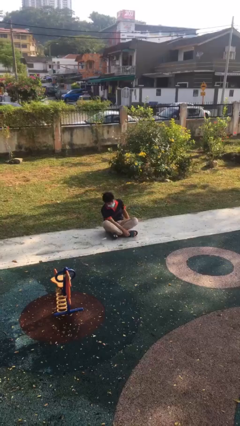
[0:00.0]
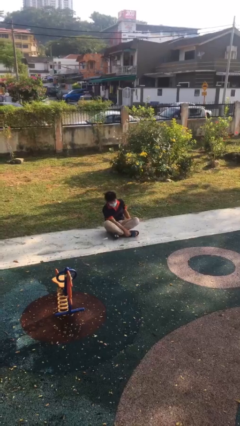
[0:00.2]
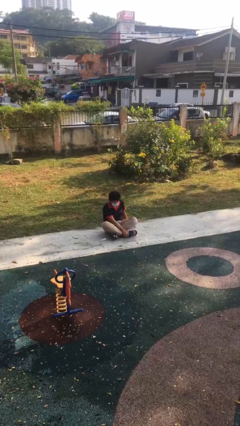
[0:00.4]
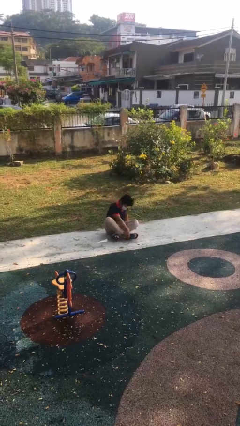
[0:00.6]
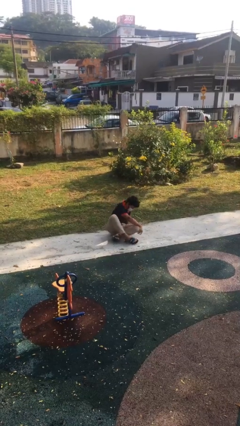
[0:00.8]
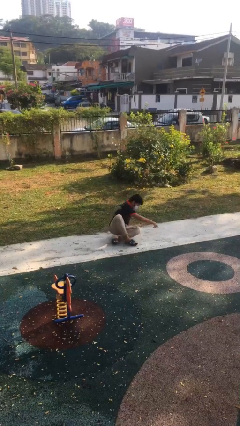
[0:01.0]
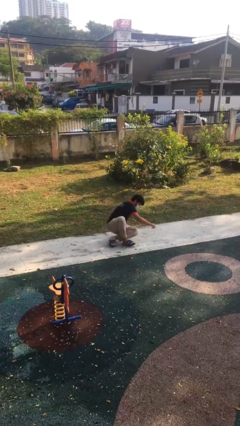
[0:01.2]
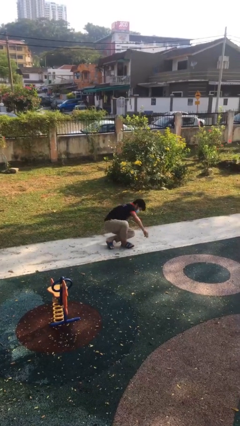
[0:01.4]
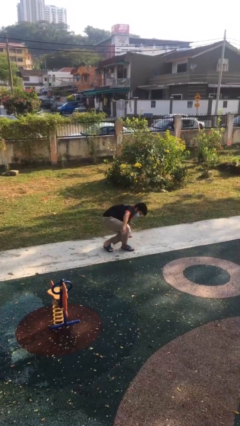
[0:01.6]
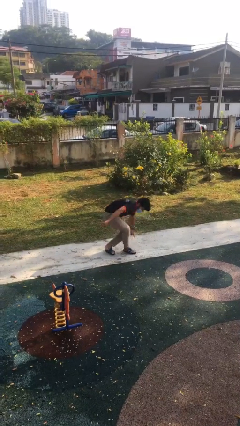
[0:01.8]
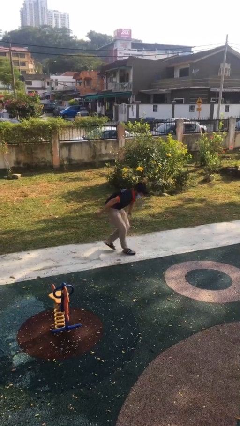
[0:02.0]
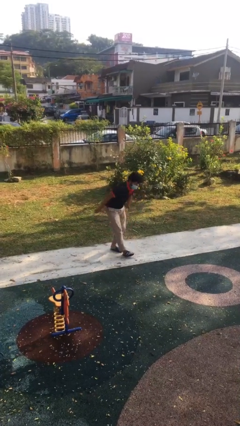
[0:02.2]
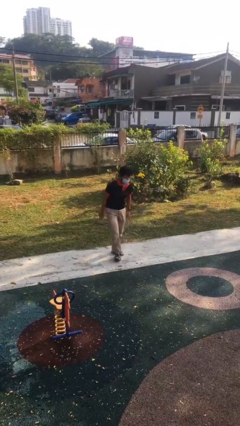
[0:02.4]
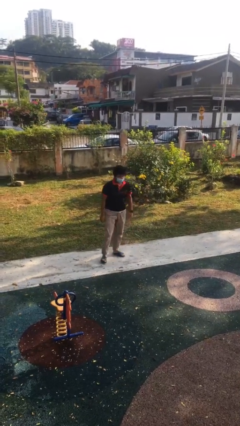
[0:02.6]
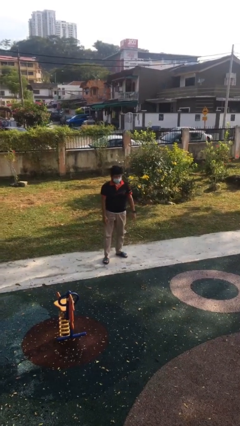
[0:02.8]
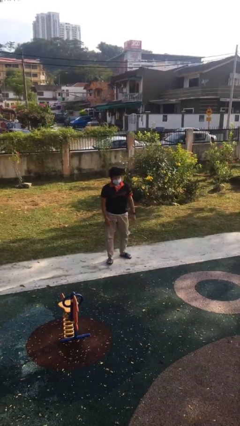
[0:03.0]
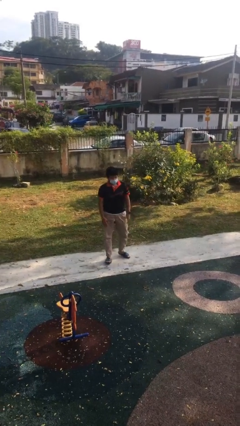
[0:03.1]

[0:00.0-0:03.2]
person stands up from floor

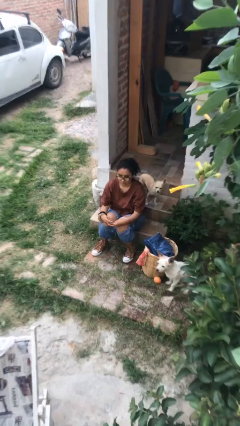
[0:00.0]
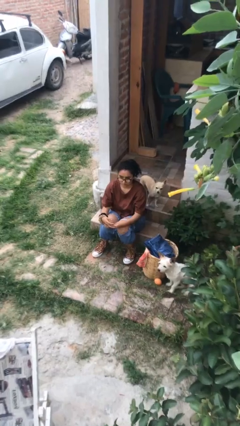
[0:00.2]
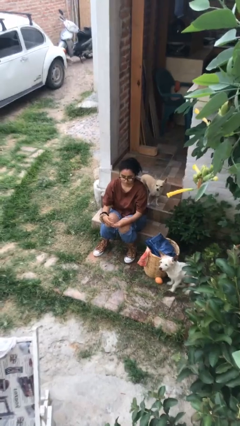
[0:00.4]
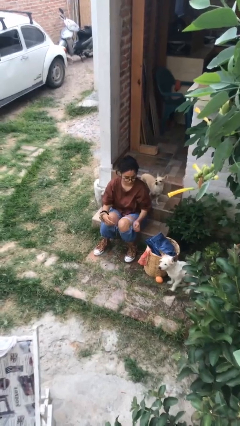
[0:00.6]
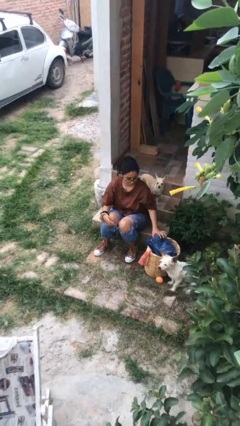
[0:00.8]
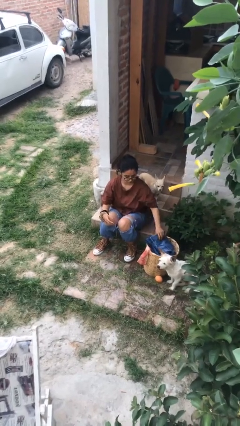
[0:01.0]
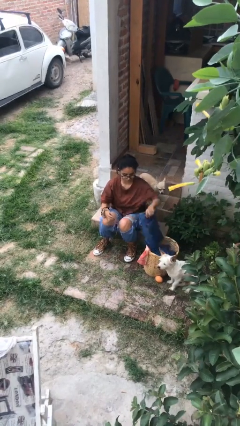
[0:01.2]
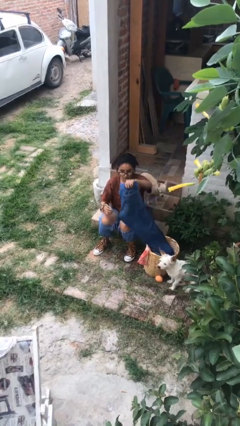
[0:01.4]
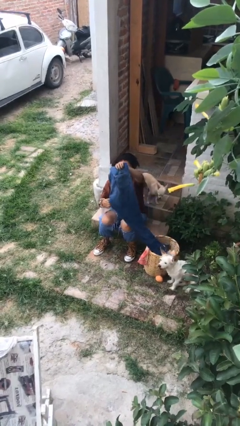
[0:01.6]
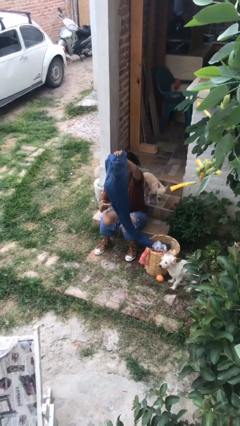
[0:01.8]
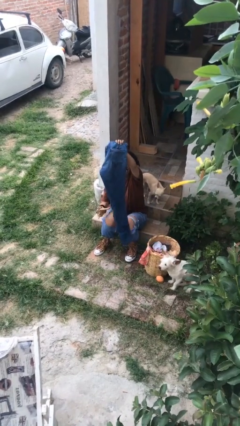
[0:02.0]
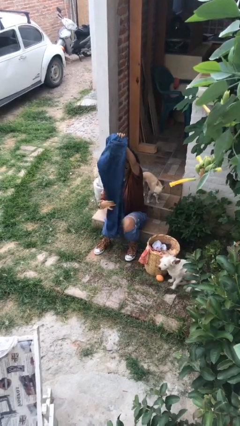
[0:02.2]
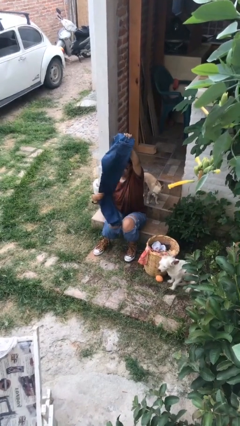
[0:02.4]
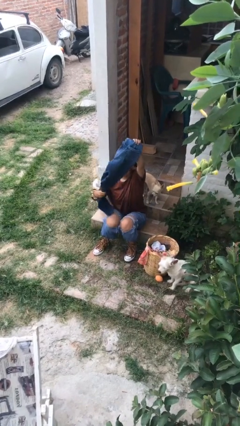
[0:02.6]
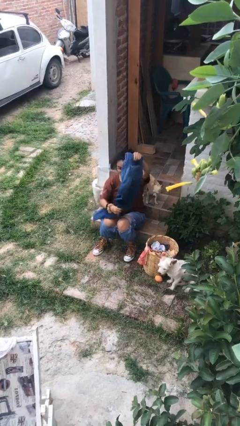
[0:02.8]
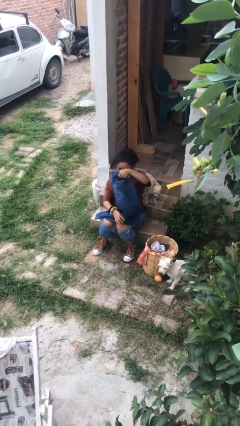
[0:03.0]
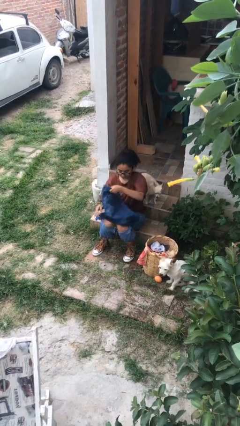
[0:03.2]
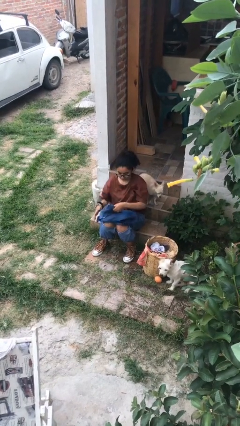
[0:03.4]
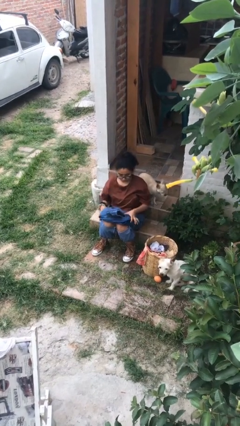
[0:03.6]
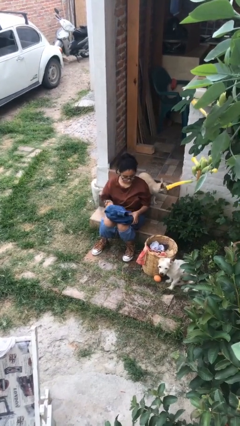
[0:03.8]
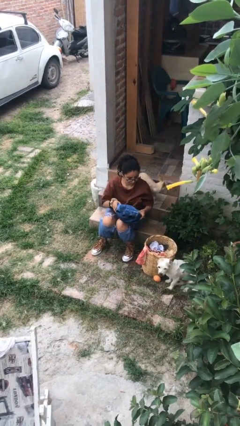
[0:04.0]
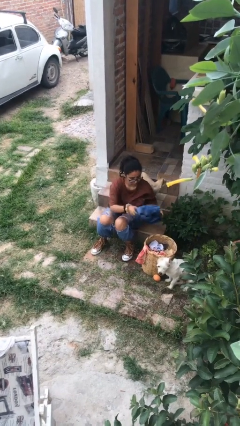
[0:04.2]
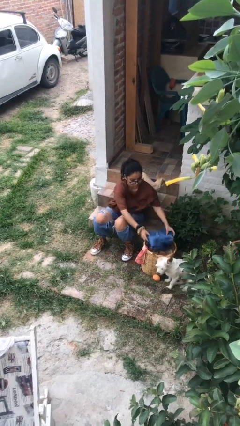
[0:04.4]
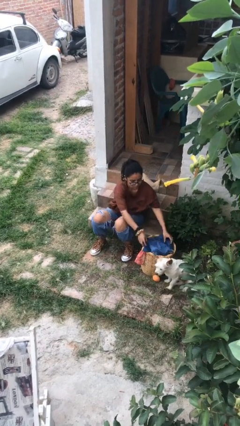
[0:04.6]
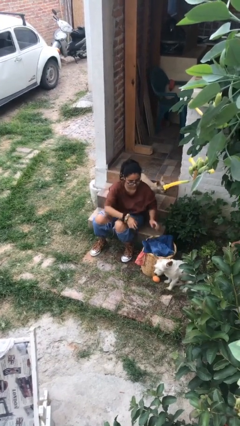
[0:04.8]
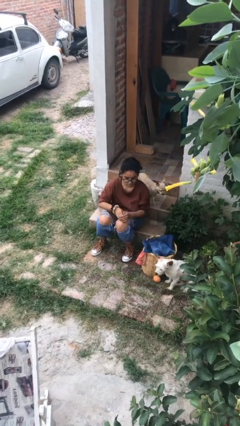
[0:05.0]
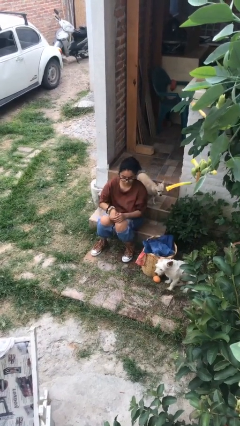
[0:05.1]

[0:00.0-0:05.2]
person folds pants

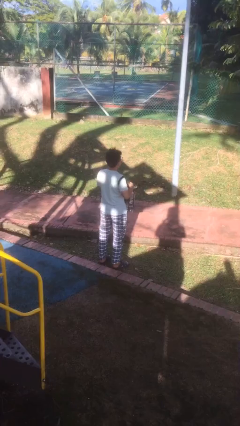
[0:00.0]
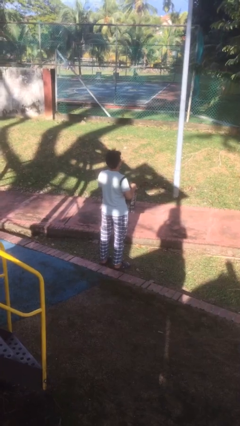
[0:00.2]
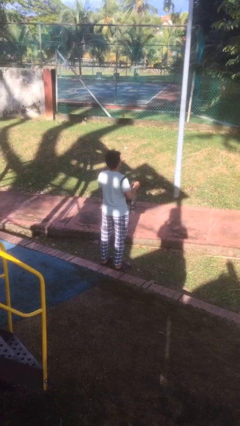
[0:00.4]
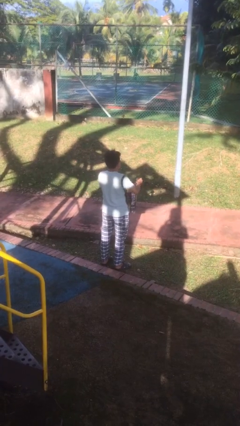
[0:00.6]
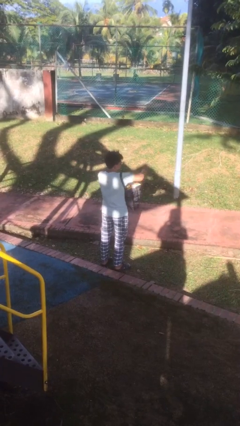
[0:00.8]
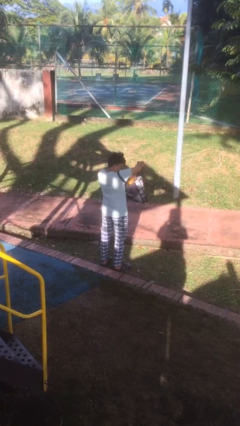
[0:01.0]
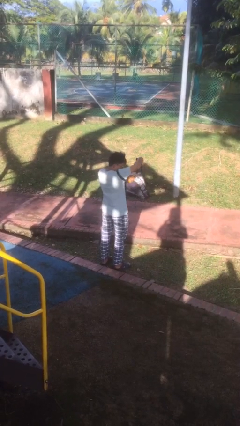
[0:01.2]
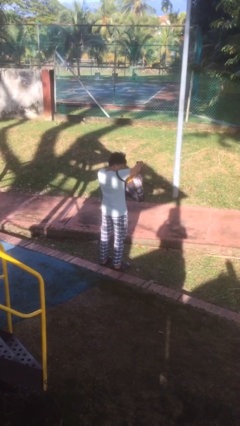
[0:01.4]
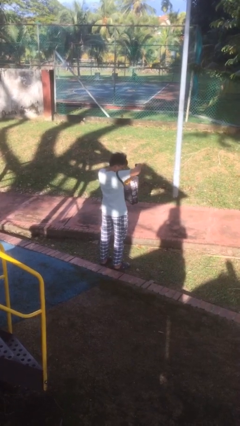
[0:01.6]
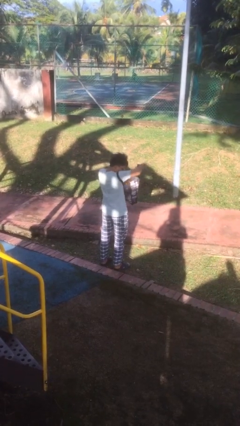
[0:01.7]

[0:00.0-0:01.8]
person searches in bag

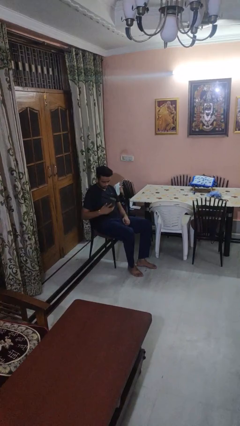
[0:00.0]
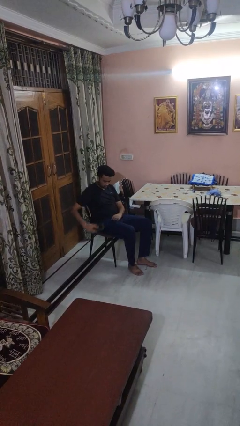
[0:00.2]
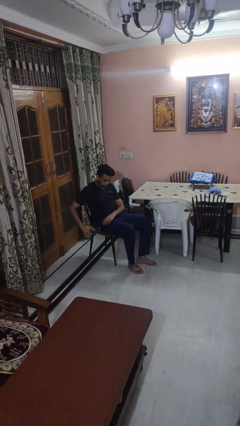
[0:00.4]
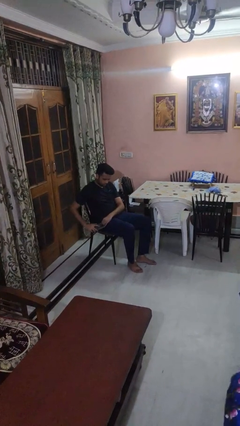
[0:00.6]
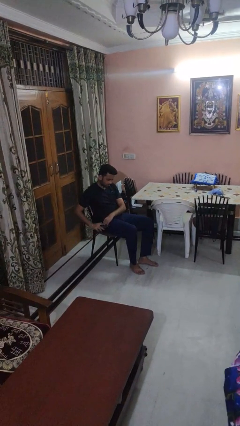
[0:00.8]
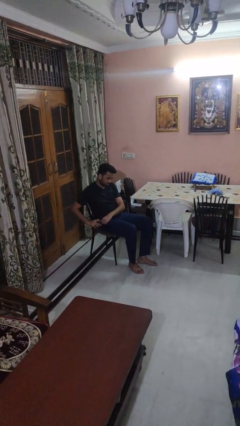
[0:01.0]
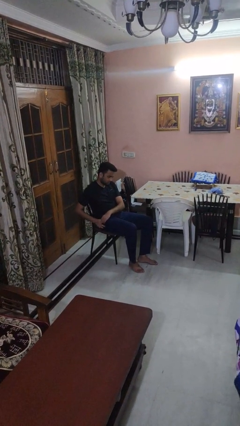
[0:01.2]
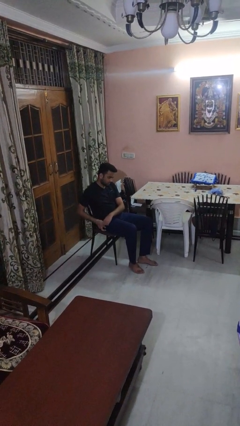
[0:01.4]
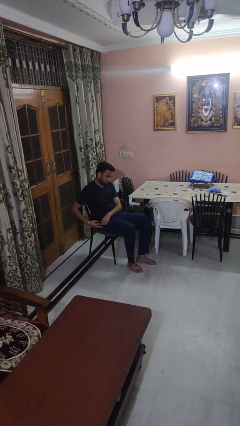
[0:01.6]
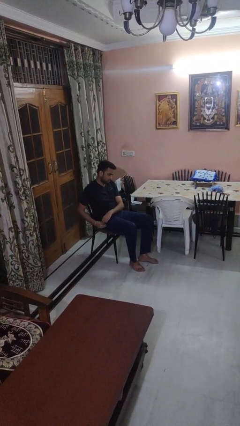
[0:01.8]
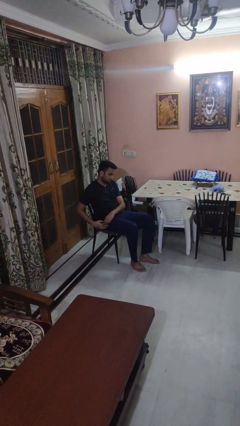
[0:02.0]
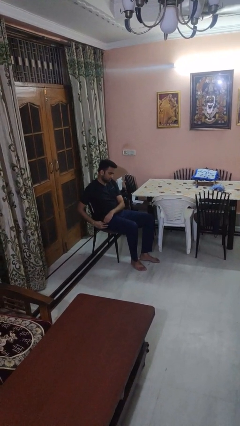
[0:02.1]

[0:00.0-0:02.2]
person puts phone into pocket

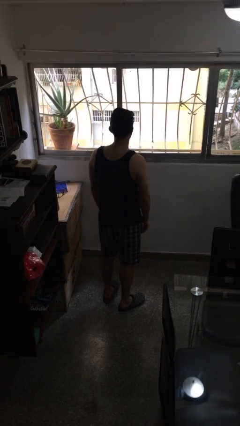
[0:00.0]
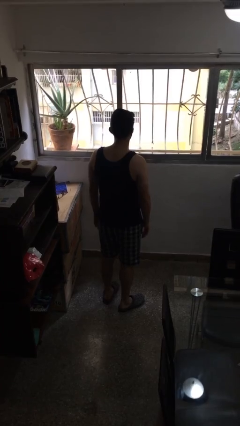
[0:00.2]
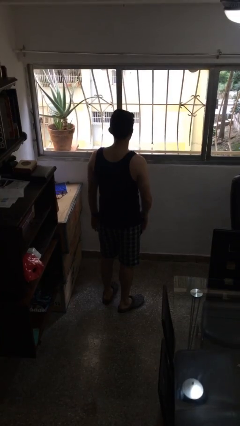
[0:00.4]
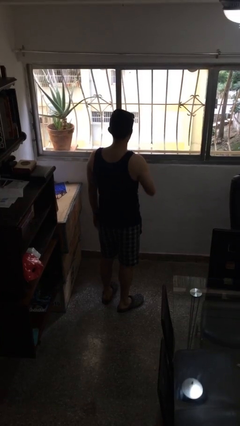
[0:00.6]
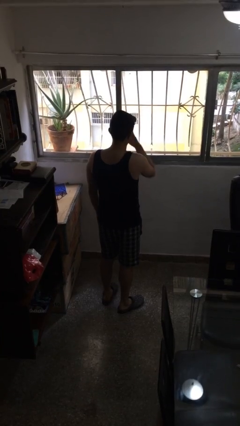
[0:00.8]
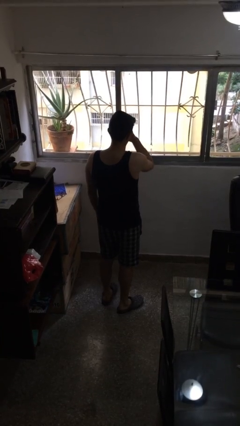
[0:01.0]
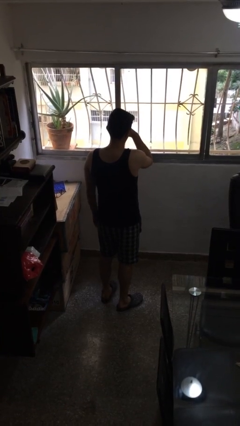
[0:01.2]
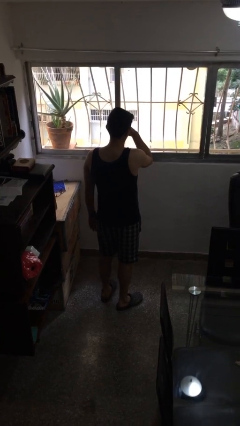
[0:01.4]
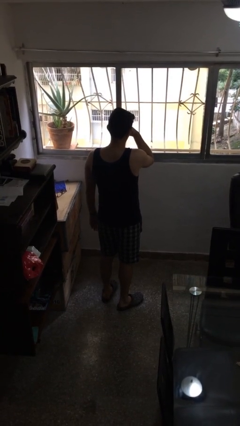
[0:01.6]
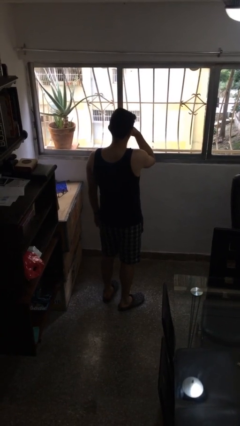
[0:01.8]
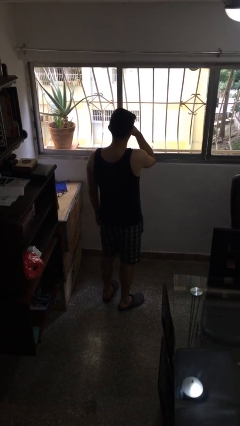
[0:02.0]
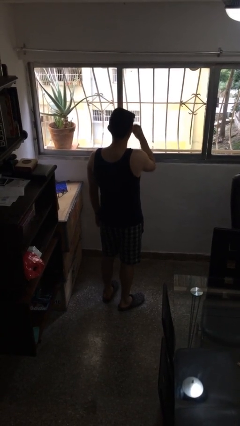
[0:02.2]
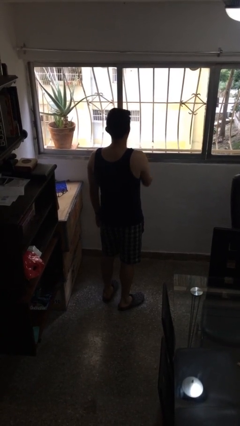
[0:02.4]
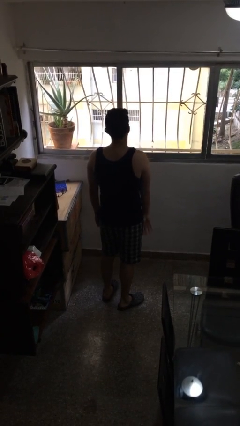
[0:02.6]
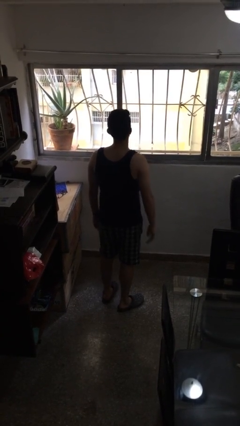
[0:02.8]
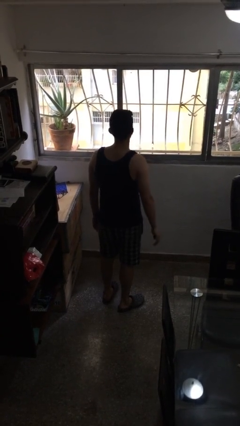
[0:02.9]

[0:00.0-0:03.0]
person rubs eyes

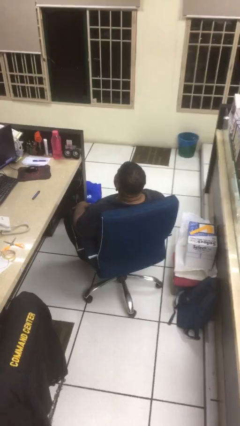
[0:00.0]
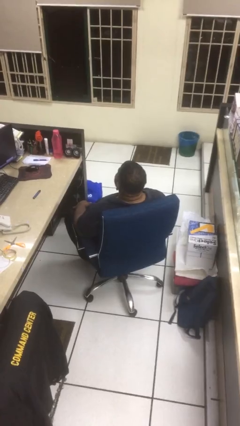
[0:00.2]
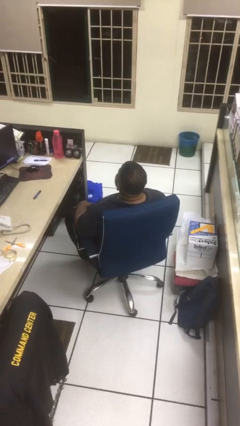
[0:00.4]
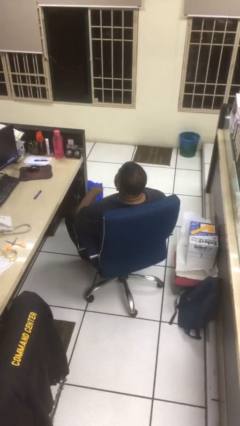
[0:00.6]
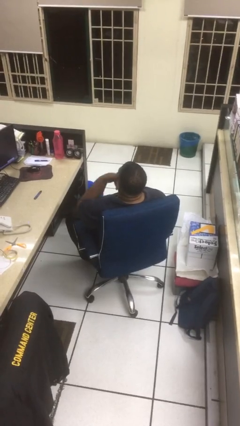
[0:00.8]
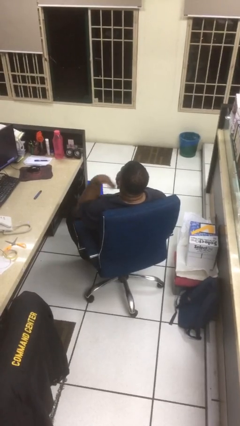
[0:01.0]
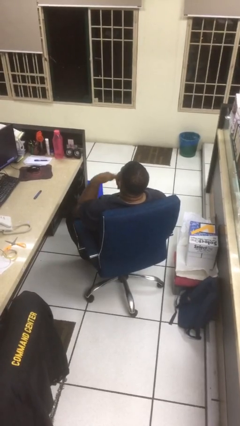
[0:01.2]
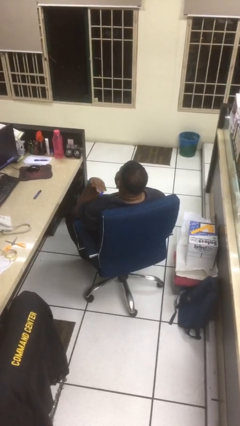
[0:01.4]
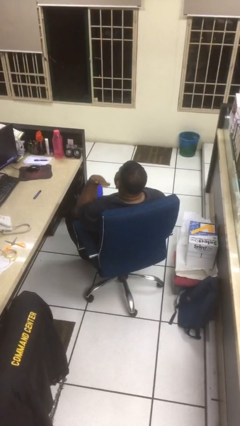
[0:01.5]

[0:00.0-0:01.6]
person gestures cut
